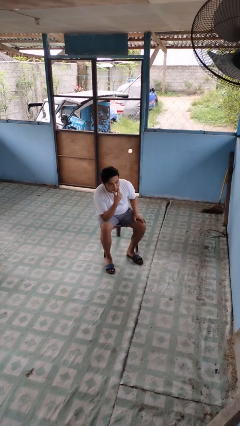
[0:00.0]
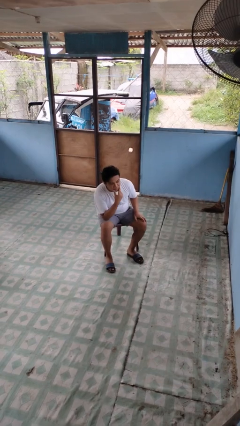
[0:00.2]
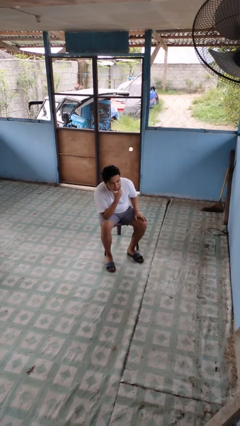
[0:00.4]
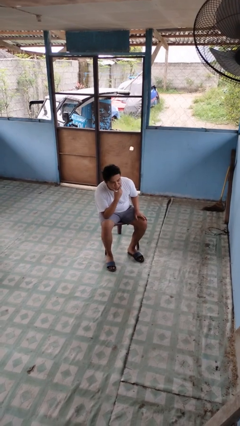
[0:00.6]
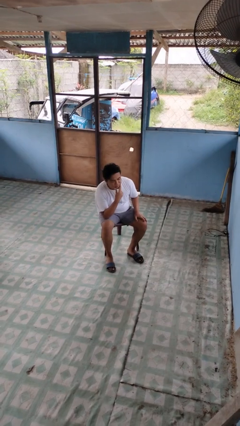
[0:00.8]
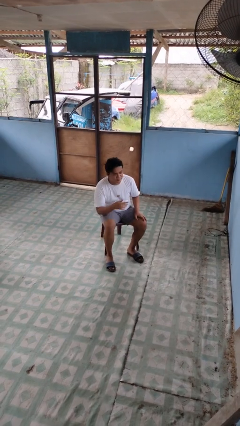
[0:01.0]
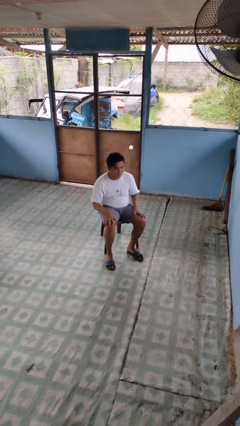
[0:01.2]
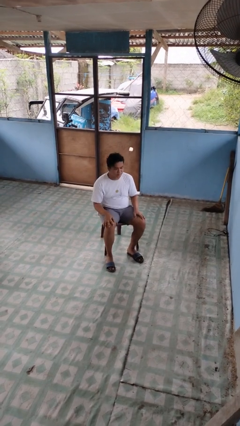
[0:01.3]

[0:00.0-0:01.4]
person strokes chin

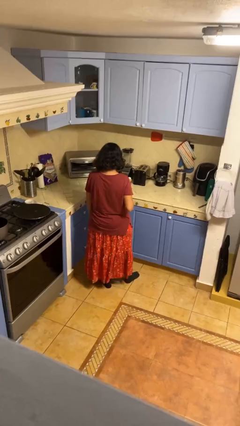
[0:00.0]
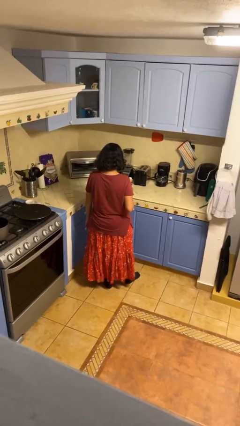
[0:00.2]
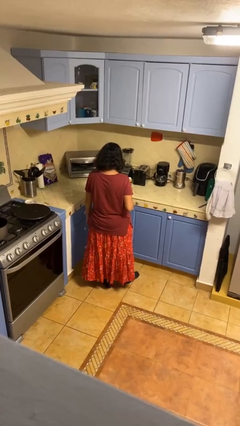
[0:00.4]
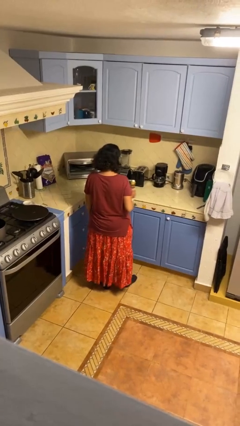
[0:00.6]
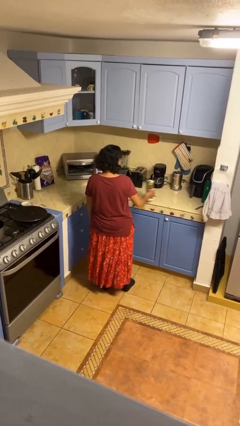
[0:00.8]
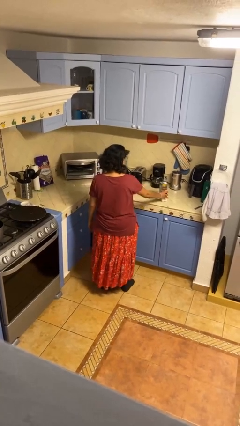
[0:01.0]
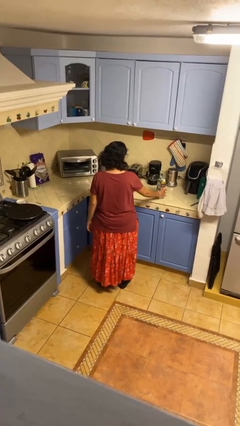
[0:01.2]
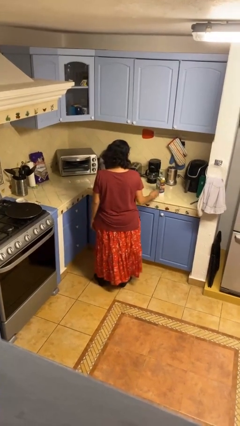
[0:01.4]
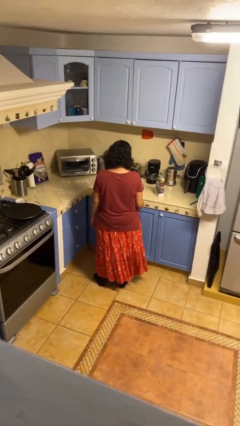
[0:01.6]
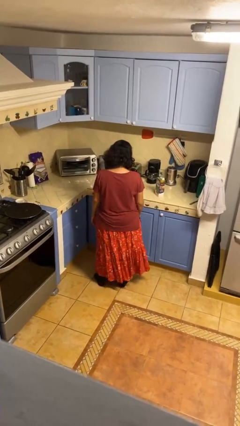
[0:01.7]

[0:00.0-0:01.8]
person puts down object on countertop

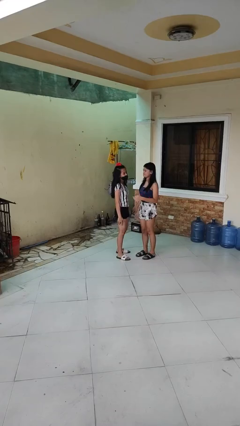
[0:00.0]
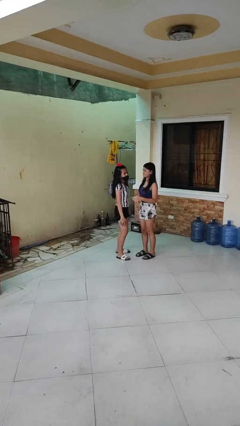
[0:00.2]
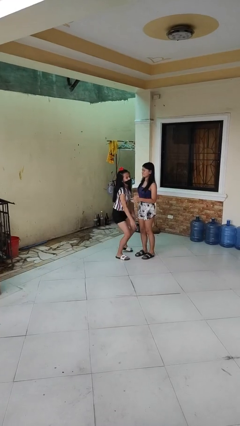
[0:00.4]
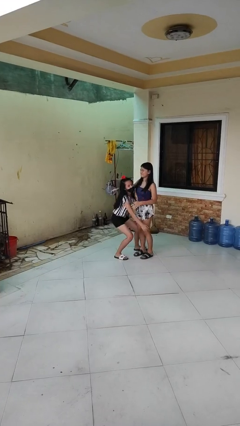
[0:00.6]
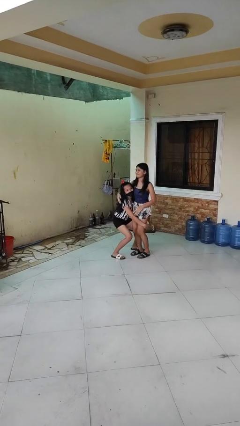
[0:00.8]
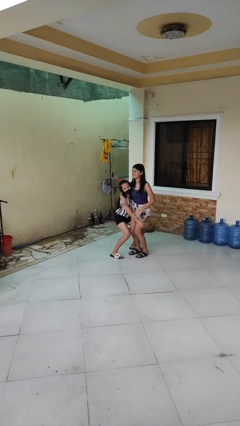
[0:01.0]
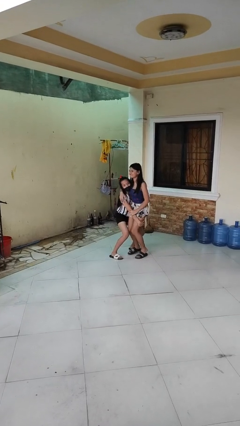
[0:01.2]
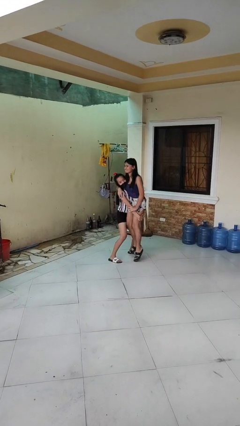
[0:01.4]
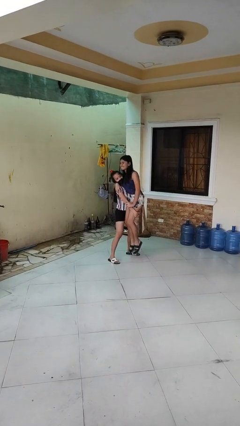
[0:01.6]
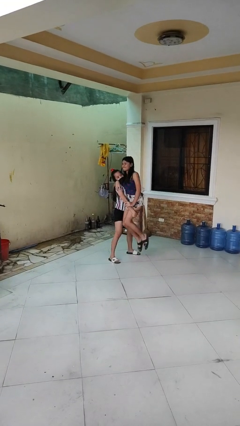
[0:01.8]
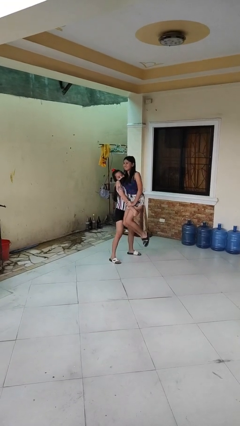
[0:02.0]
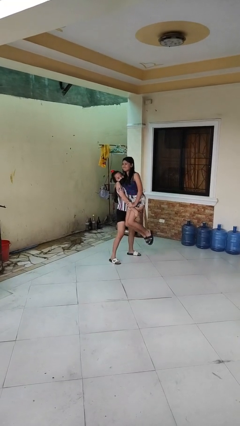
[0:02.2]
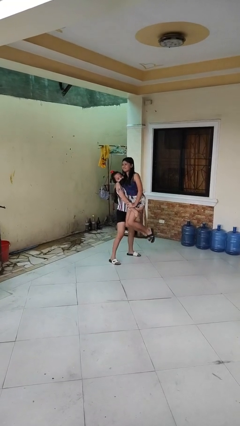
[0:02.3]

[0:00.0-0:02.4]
person picks up person

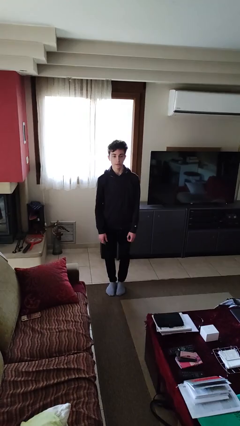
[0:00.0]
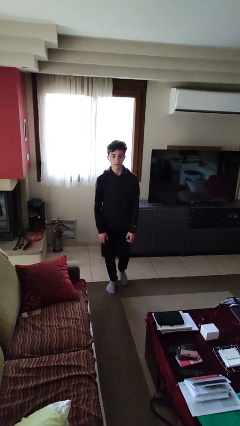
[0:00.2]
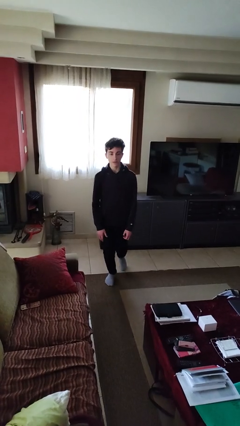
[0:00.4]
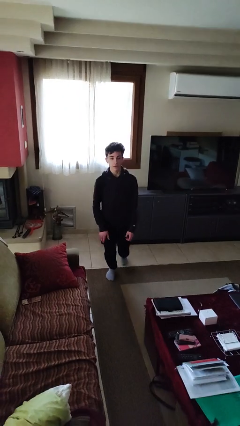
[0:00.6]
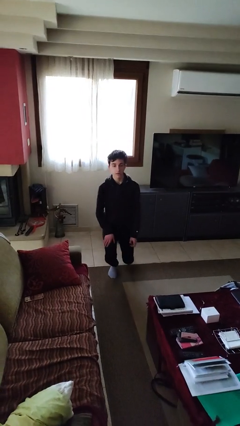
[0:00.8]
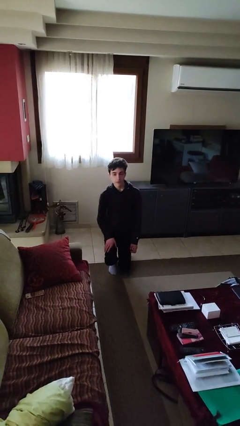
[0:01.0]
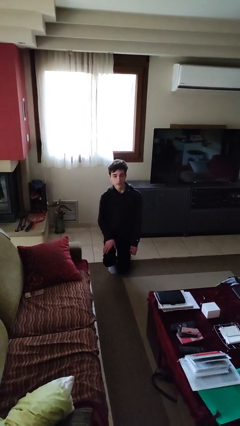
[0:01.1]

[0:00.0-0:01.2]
person kneels

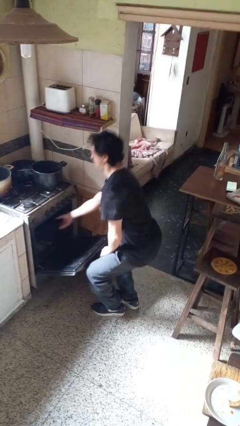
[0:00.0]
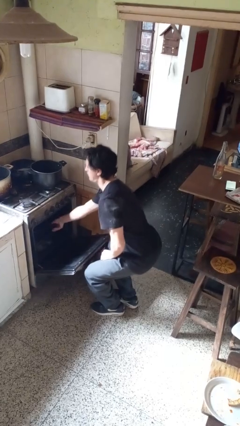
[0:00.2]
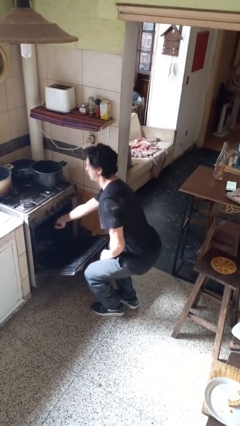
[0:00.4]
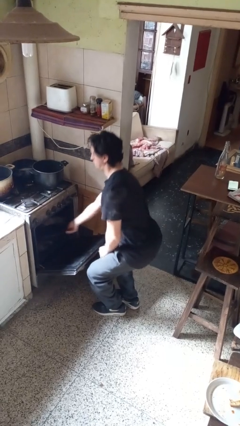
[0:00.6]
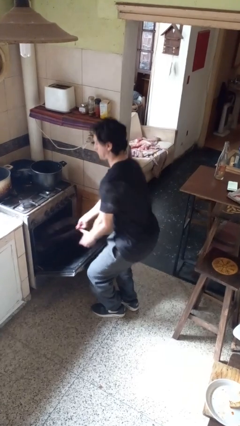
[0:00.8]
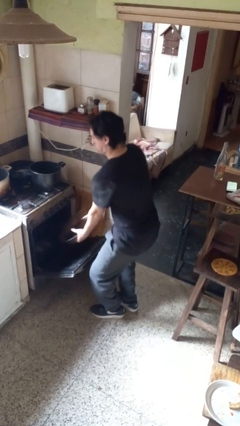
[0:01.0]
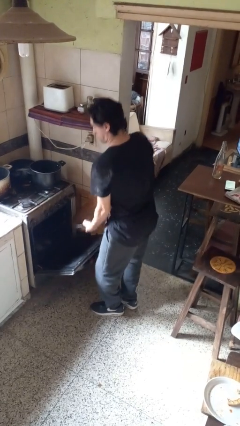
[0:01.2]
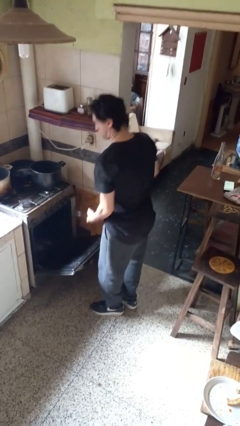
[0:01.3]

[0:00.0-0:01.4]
person takes object from oven

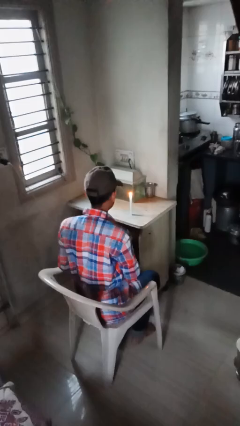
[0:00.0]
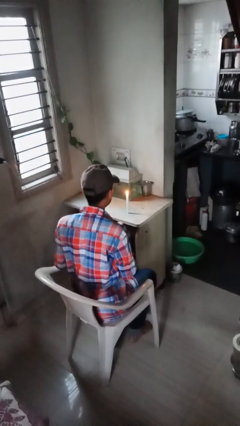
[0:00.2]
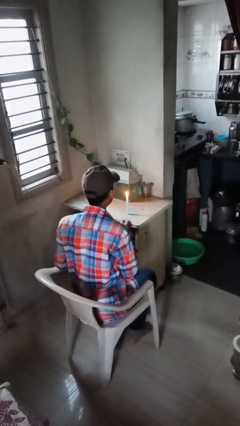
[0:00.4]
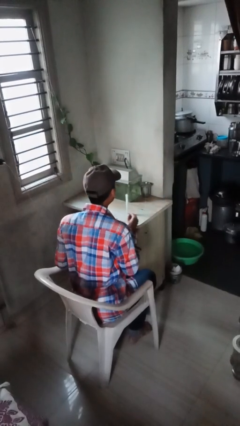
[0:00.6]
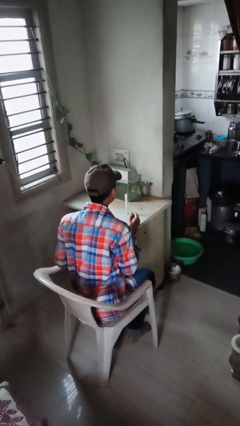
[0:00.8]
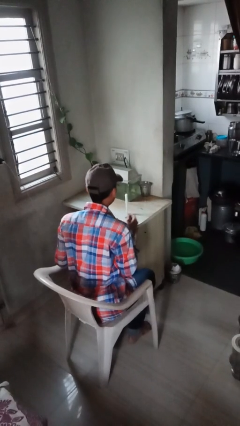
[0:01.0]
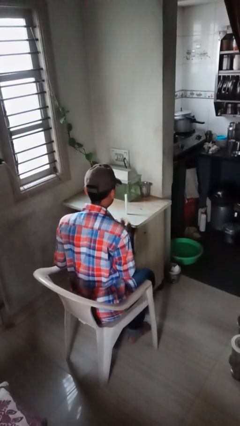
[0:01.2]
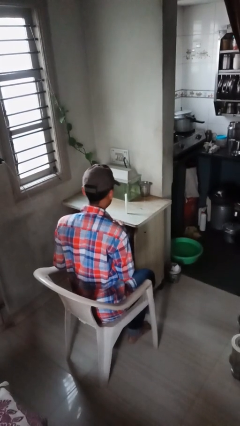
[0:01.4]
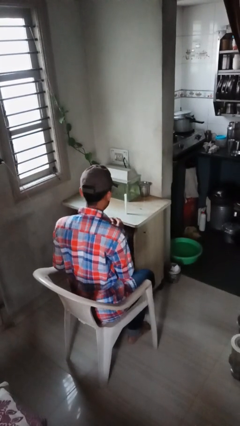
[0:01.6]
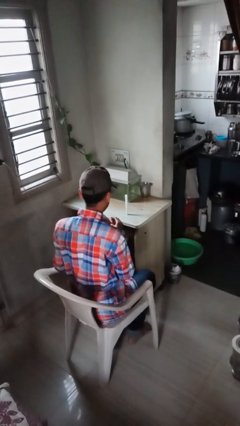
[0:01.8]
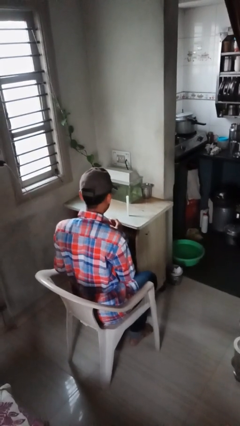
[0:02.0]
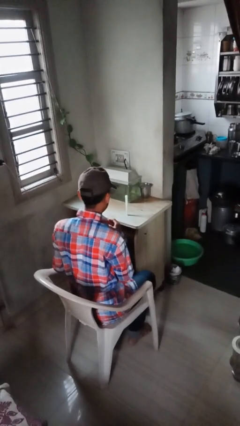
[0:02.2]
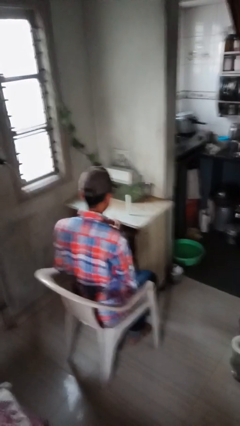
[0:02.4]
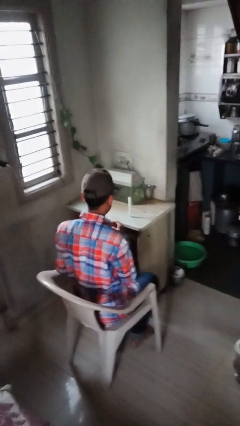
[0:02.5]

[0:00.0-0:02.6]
person extinguishes candle

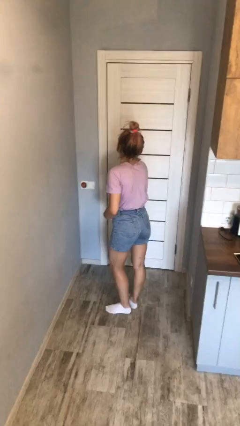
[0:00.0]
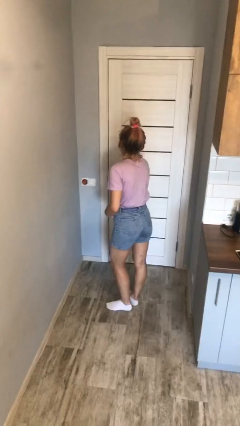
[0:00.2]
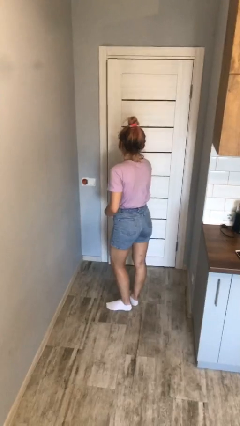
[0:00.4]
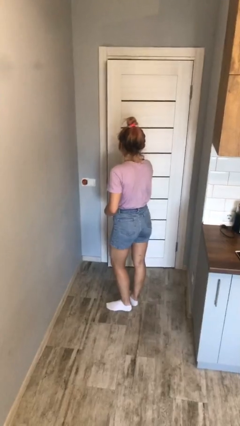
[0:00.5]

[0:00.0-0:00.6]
person opens facility door

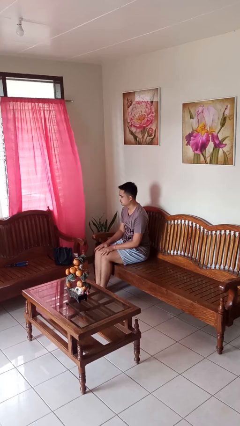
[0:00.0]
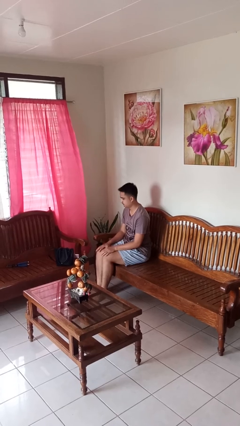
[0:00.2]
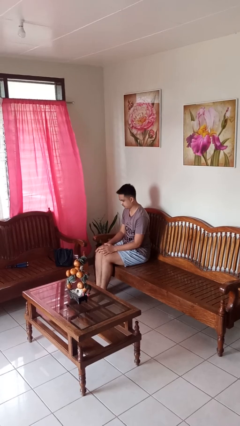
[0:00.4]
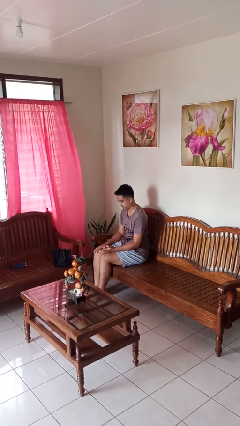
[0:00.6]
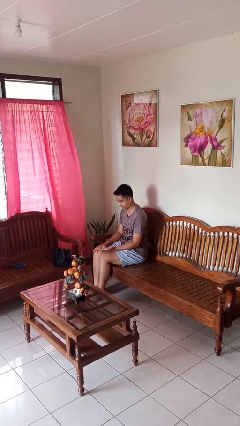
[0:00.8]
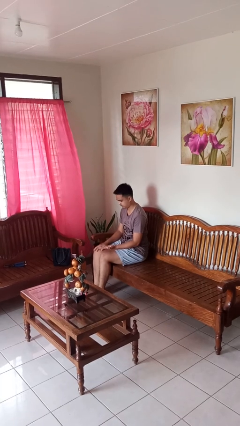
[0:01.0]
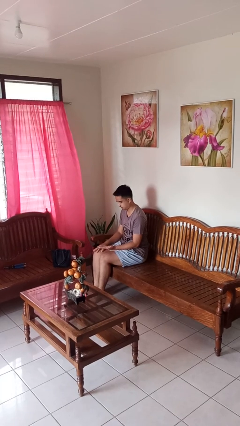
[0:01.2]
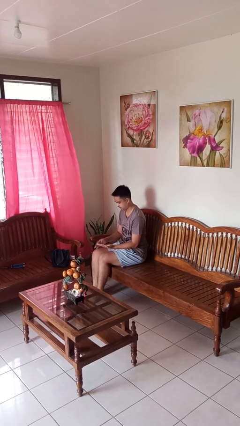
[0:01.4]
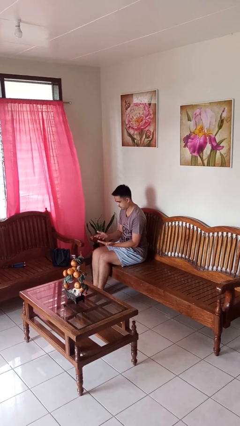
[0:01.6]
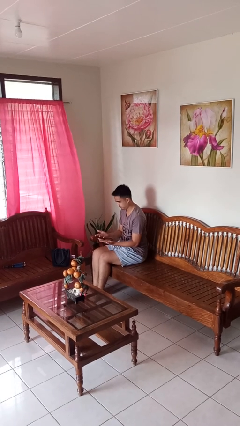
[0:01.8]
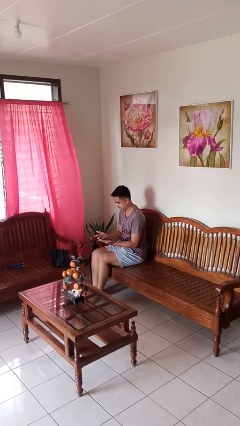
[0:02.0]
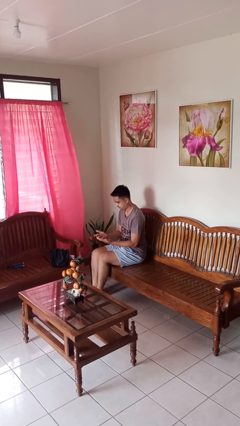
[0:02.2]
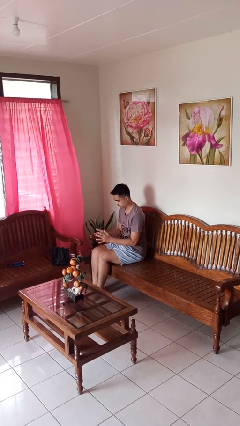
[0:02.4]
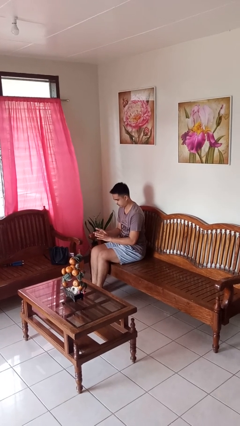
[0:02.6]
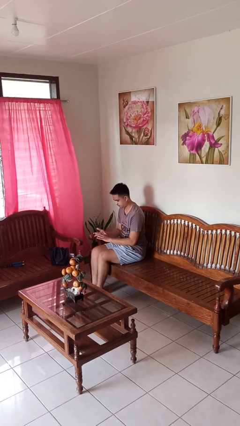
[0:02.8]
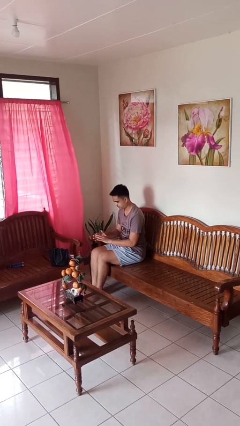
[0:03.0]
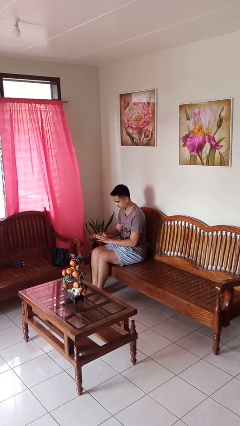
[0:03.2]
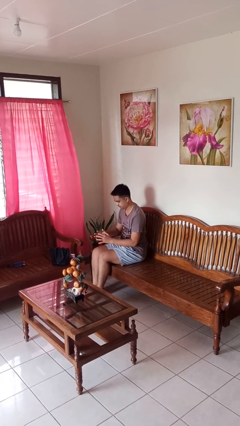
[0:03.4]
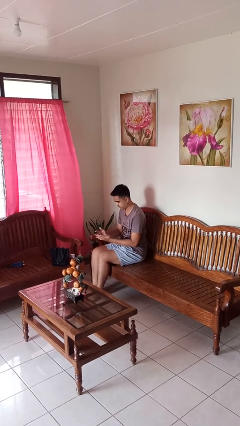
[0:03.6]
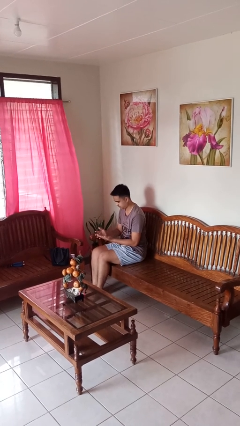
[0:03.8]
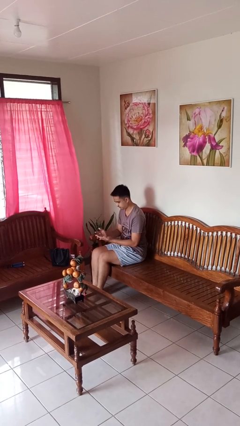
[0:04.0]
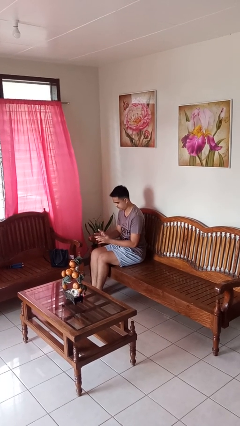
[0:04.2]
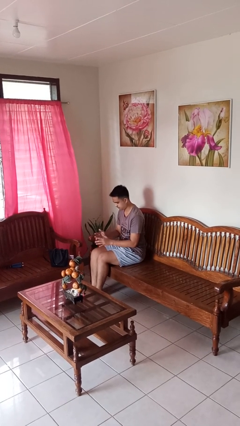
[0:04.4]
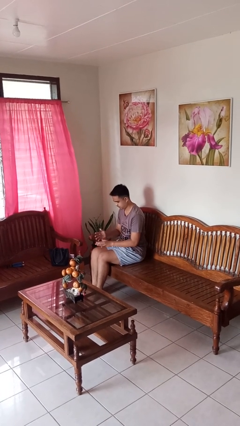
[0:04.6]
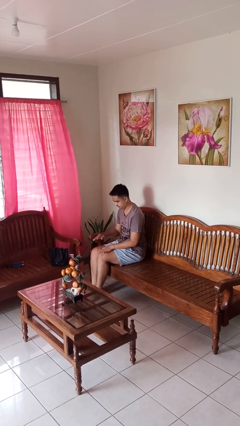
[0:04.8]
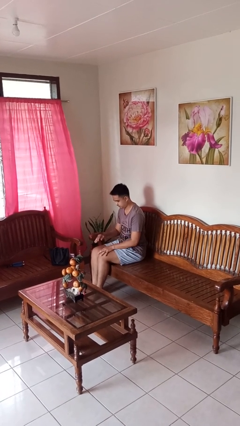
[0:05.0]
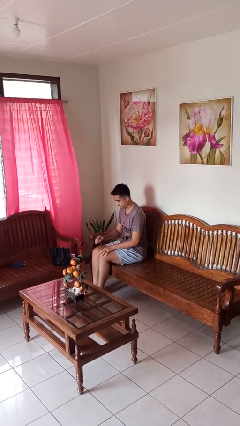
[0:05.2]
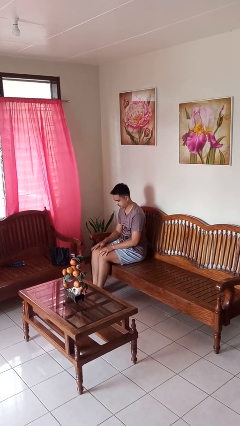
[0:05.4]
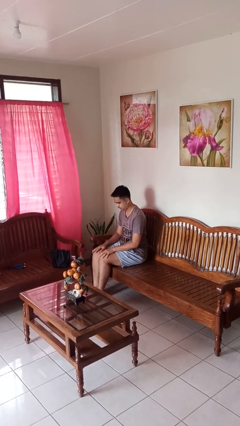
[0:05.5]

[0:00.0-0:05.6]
person looks at hands in lap
